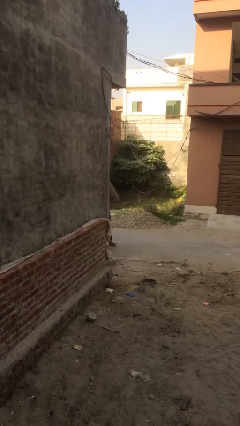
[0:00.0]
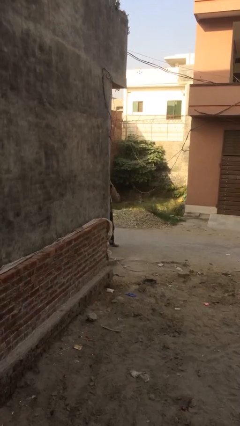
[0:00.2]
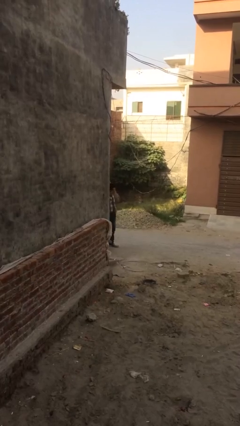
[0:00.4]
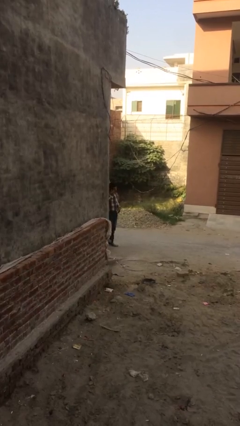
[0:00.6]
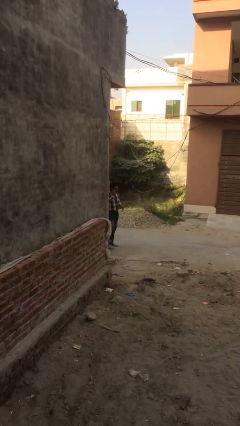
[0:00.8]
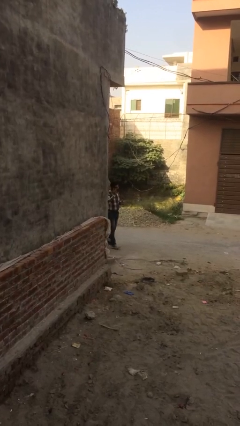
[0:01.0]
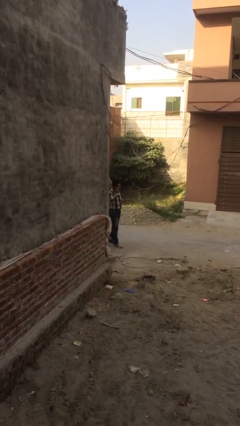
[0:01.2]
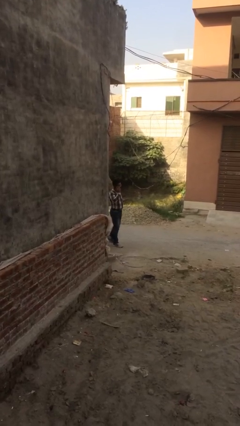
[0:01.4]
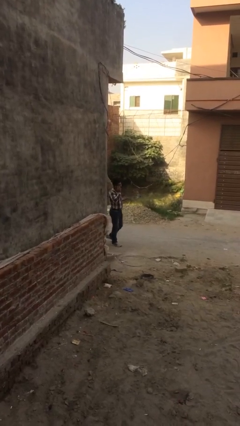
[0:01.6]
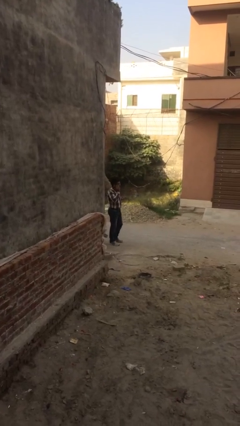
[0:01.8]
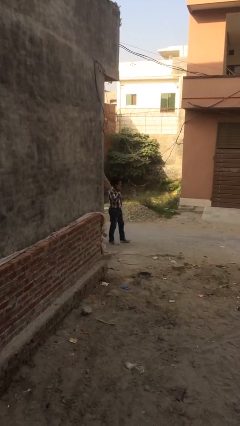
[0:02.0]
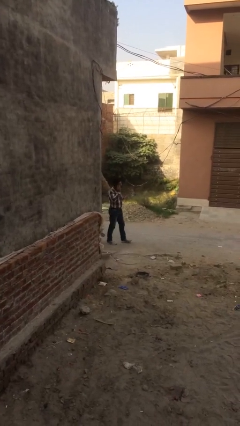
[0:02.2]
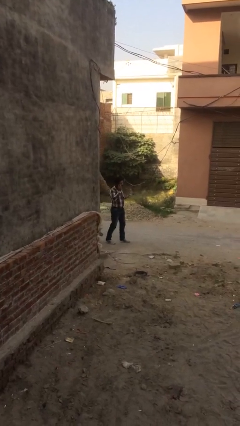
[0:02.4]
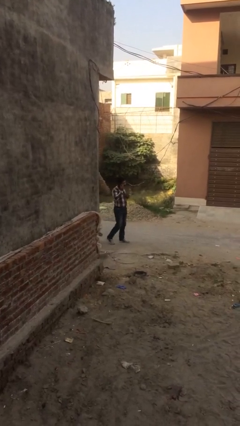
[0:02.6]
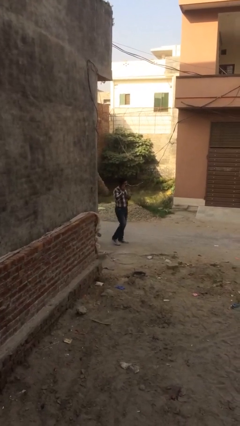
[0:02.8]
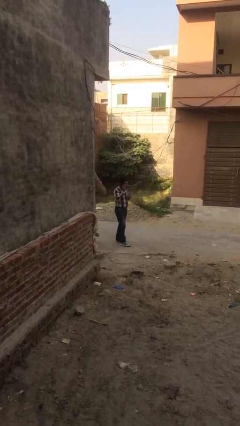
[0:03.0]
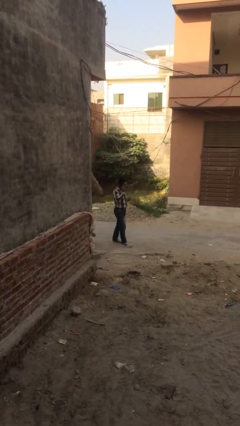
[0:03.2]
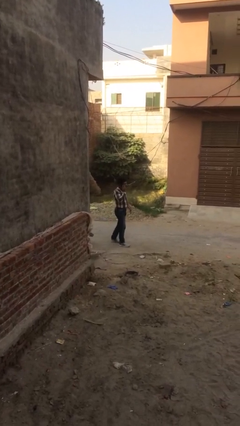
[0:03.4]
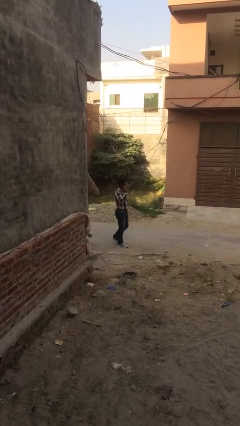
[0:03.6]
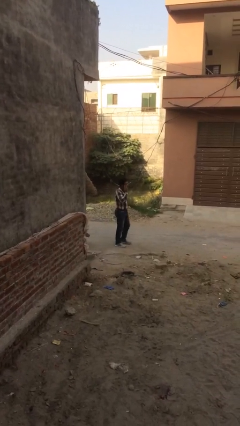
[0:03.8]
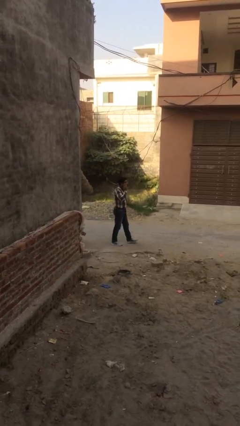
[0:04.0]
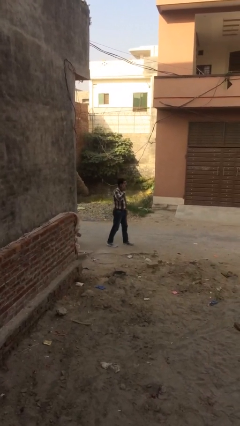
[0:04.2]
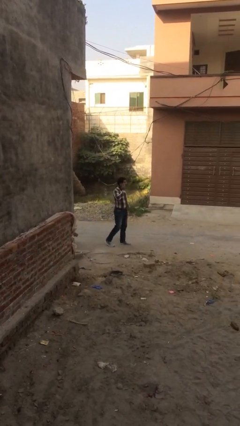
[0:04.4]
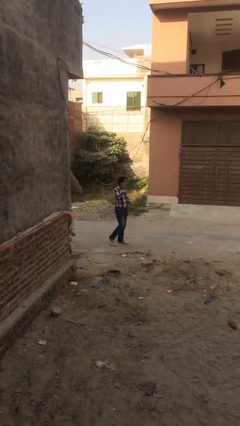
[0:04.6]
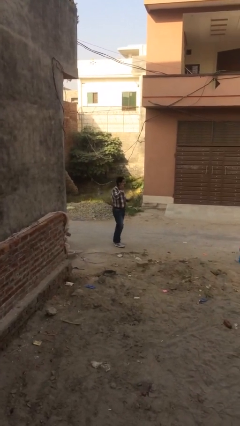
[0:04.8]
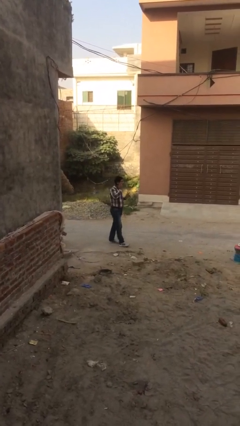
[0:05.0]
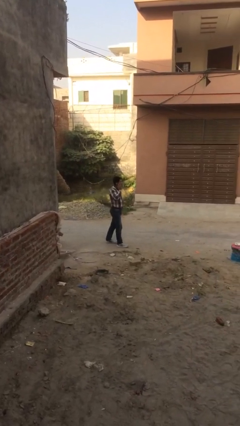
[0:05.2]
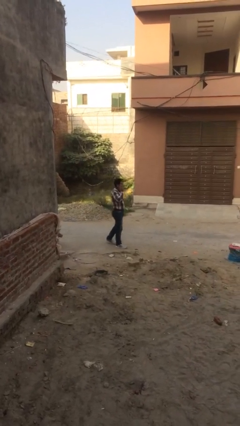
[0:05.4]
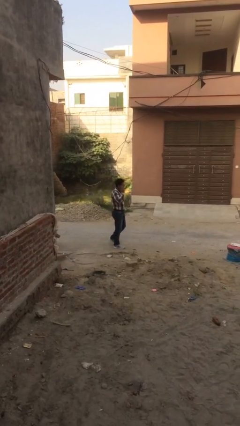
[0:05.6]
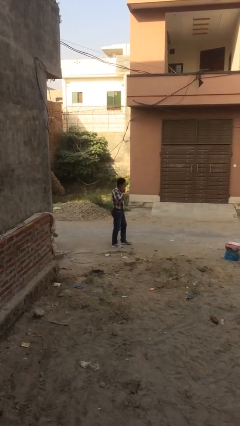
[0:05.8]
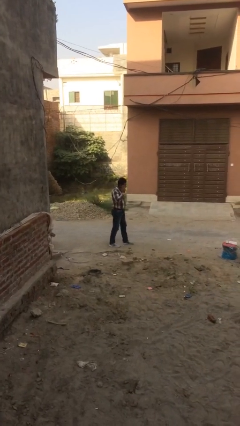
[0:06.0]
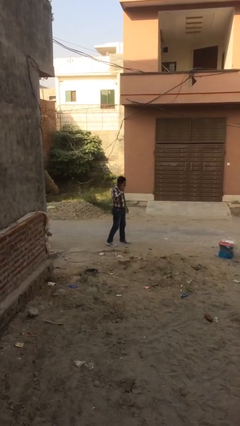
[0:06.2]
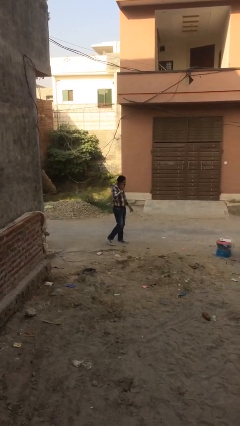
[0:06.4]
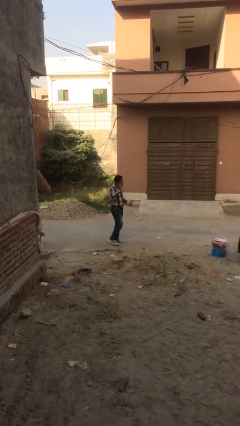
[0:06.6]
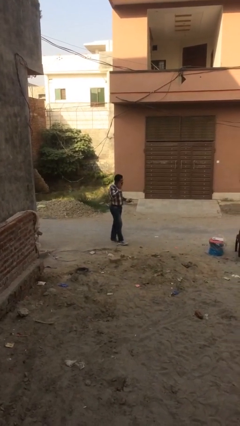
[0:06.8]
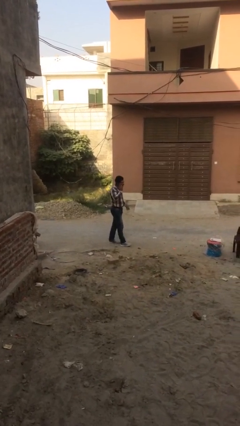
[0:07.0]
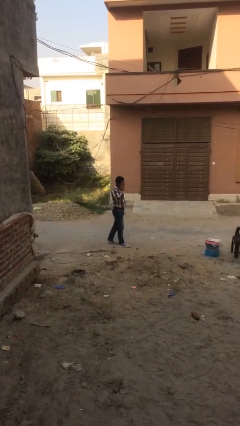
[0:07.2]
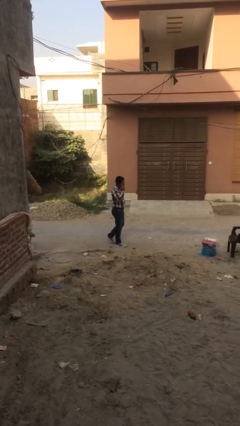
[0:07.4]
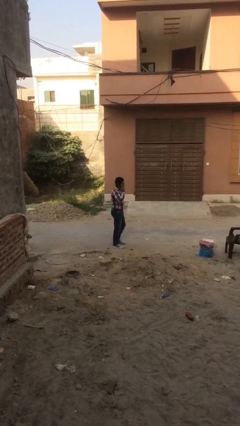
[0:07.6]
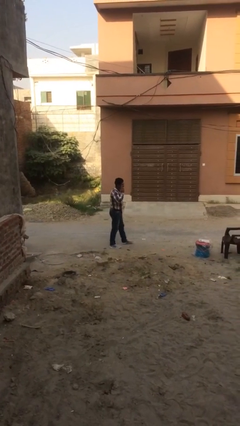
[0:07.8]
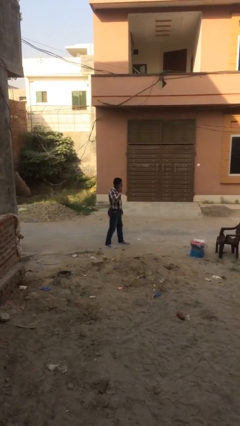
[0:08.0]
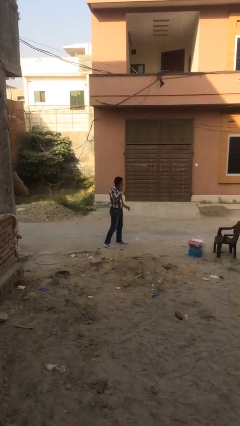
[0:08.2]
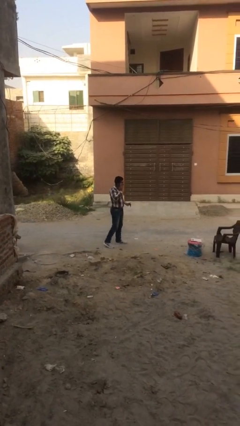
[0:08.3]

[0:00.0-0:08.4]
person enters scene through structure

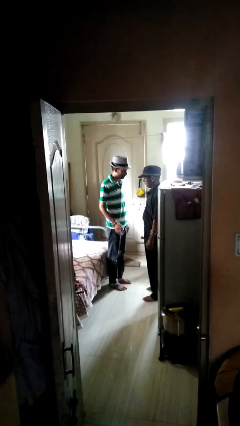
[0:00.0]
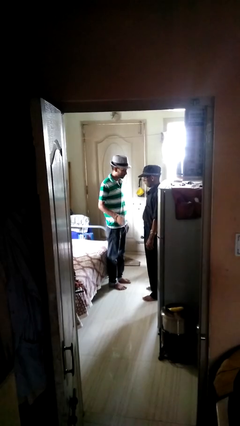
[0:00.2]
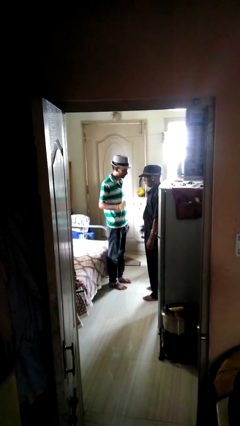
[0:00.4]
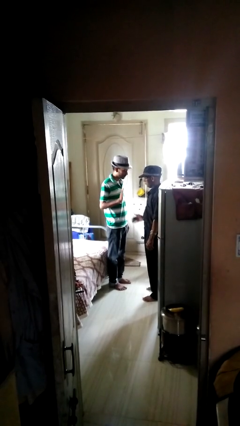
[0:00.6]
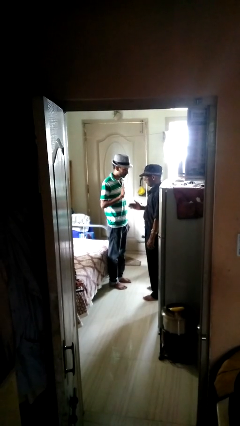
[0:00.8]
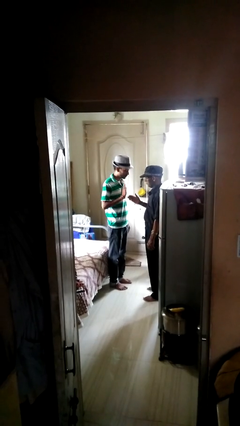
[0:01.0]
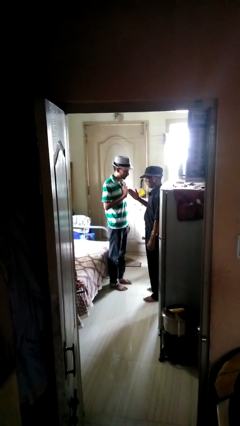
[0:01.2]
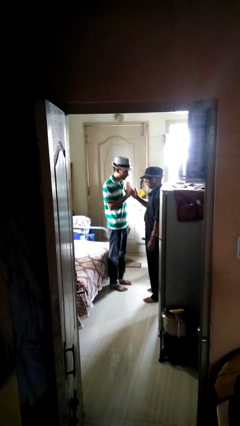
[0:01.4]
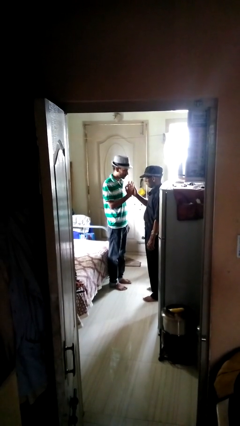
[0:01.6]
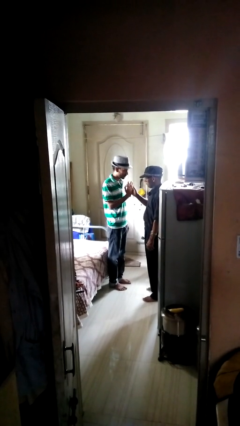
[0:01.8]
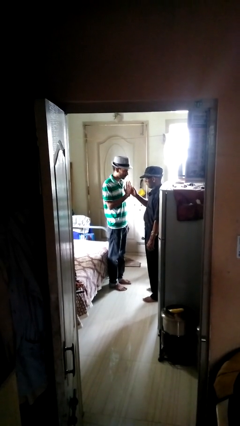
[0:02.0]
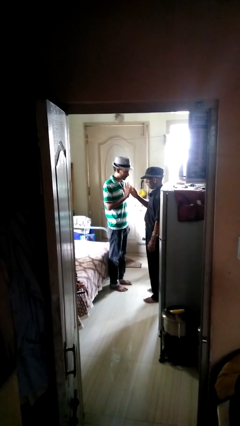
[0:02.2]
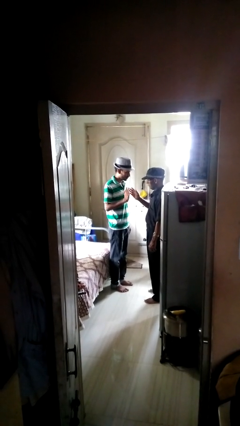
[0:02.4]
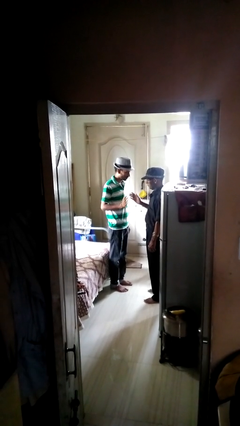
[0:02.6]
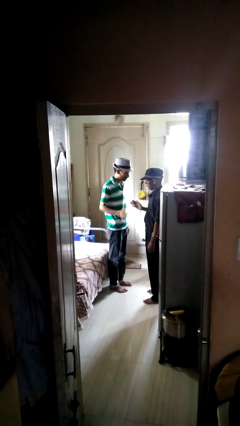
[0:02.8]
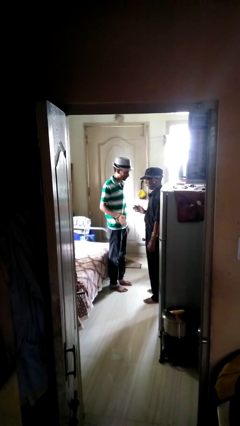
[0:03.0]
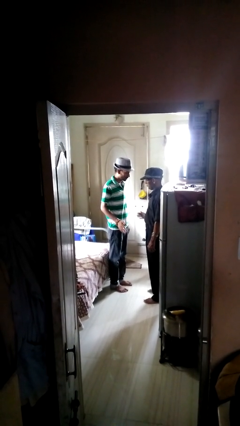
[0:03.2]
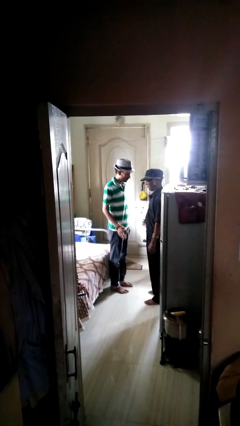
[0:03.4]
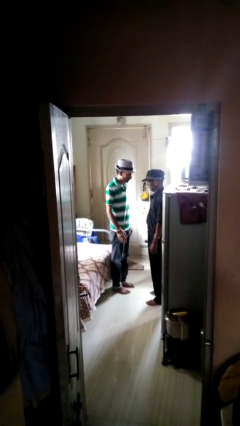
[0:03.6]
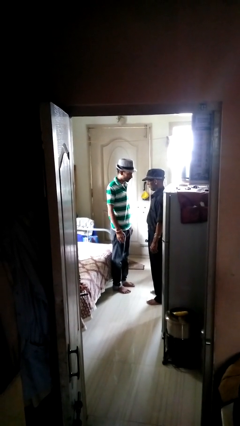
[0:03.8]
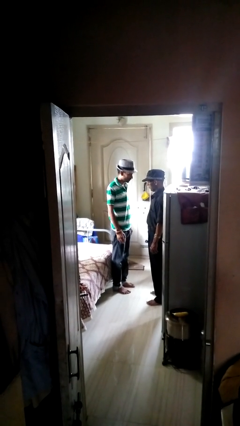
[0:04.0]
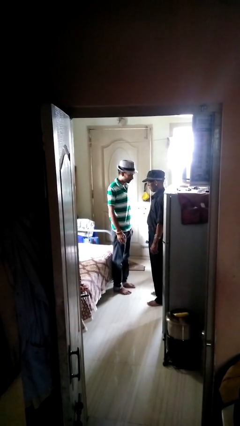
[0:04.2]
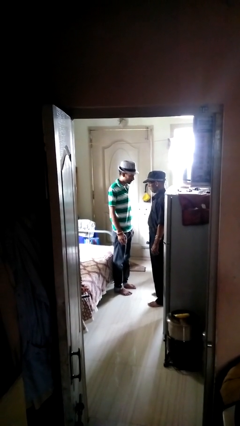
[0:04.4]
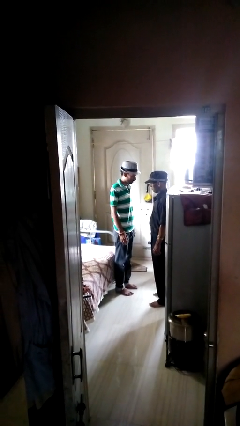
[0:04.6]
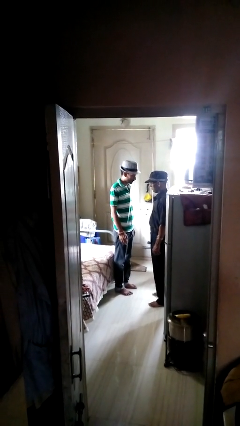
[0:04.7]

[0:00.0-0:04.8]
person highfives hand

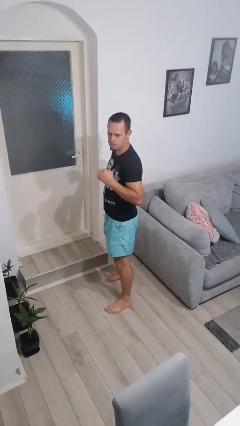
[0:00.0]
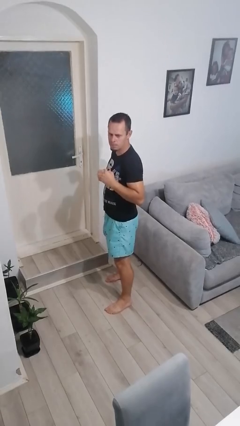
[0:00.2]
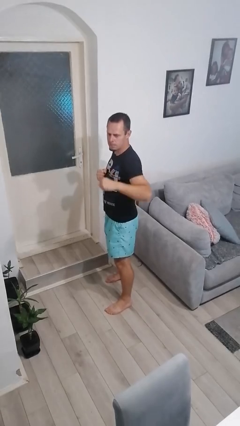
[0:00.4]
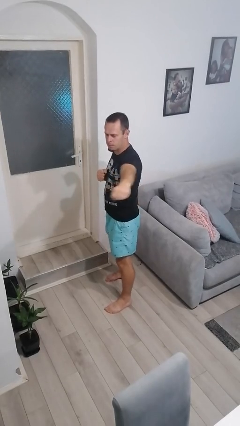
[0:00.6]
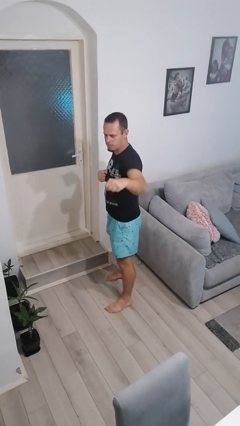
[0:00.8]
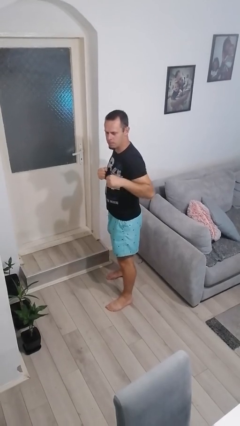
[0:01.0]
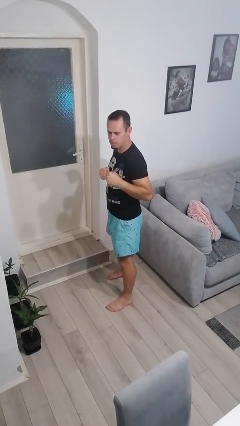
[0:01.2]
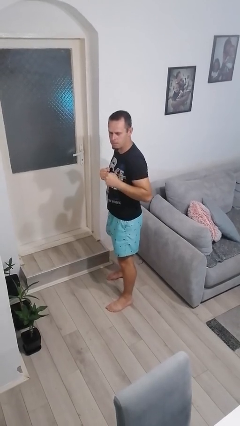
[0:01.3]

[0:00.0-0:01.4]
person karate chop

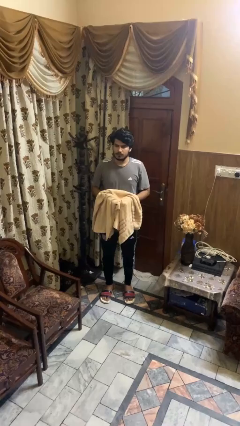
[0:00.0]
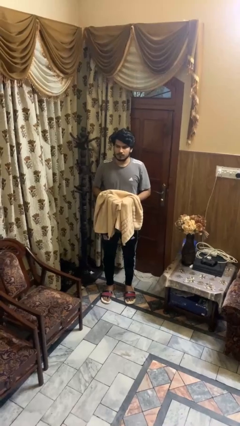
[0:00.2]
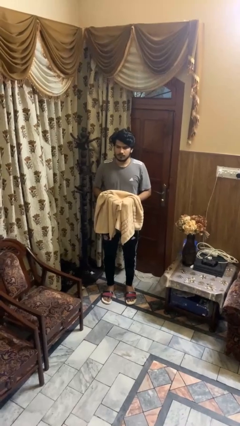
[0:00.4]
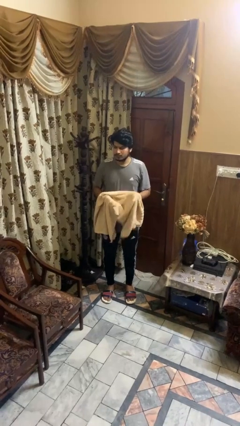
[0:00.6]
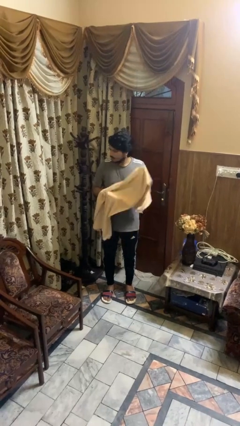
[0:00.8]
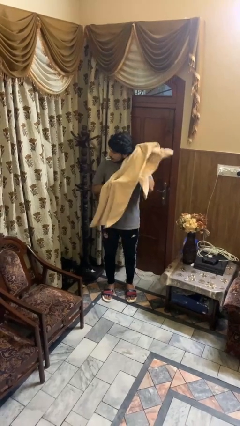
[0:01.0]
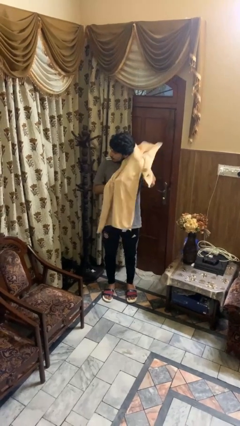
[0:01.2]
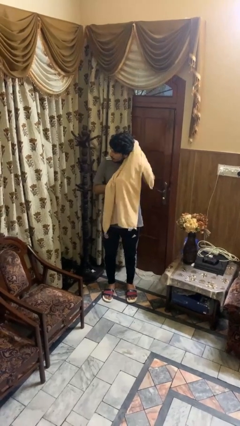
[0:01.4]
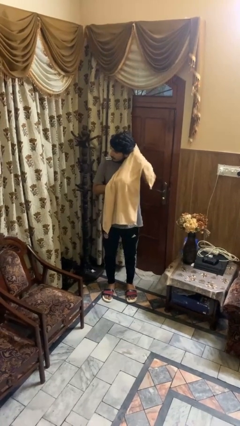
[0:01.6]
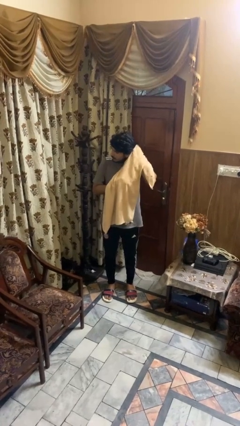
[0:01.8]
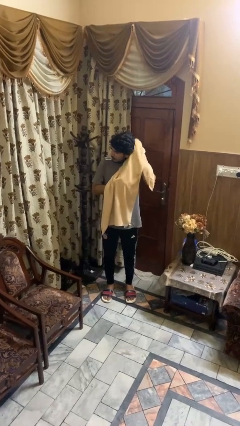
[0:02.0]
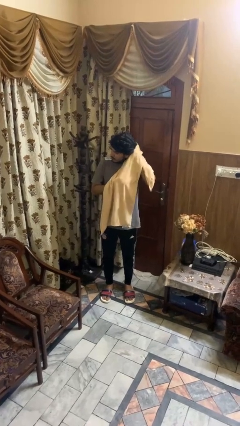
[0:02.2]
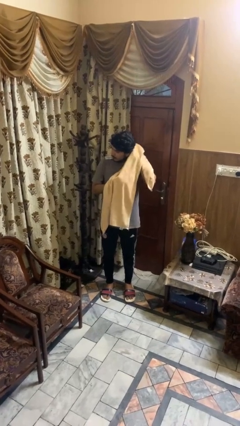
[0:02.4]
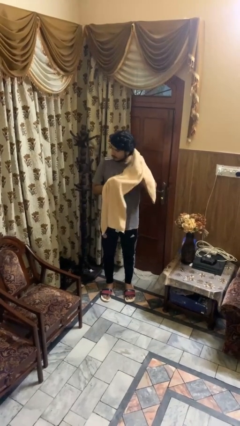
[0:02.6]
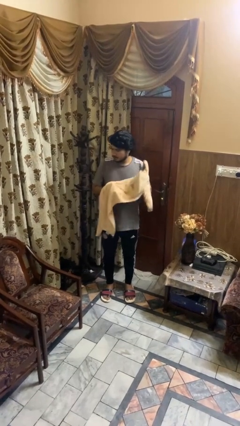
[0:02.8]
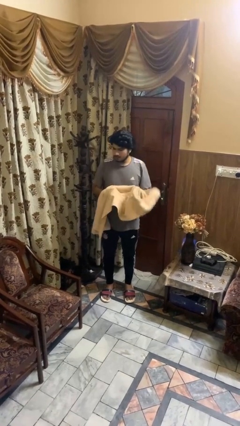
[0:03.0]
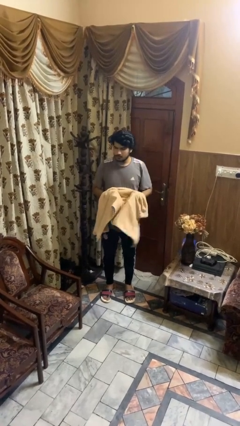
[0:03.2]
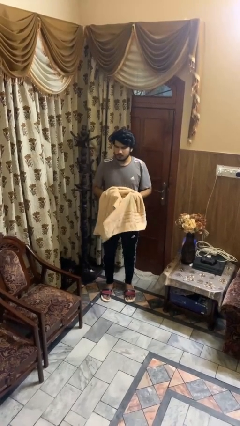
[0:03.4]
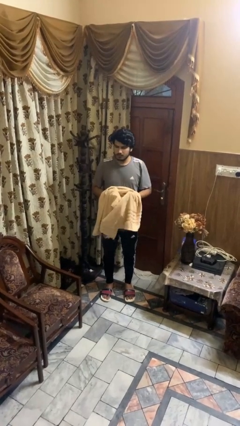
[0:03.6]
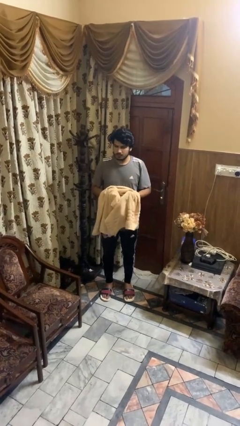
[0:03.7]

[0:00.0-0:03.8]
person dries hair with towel
